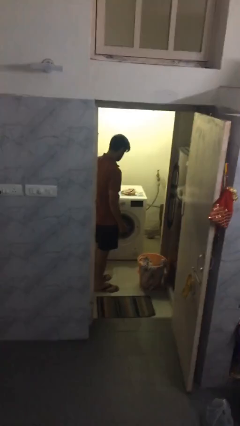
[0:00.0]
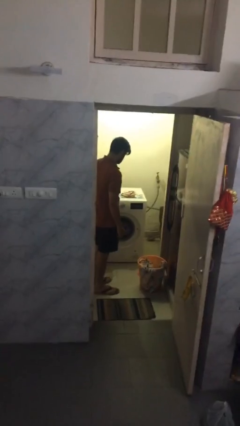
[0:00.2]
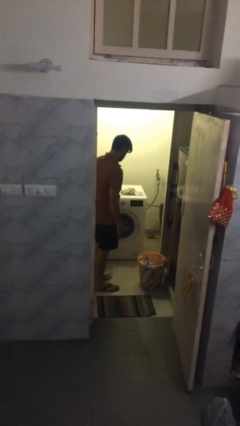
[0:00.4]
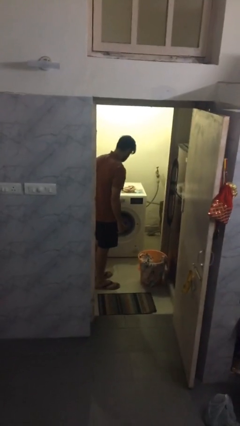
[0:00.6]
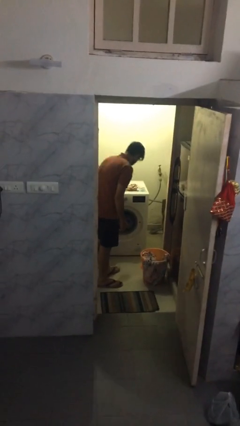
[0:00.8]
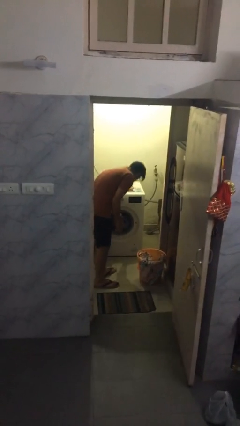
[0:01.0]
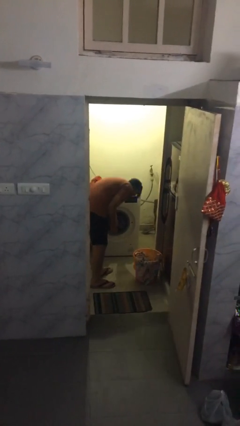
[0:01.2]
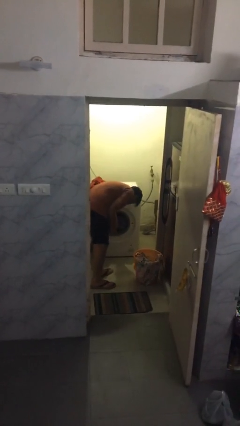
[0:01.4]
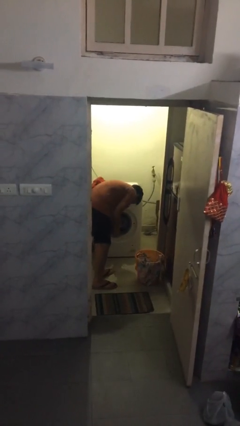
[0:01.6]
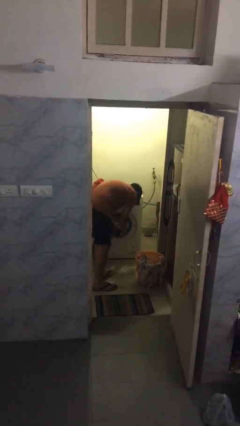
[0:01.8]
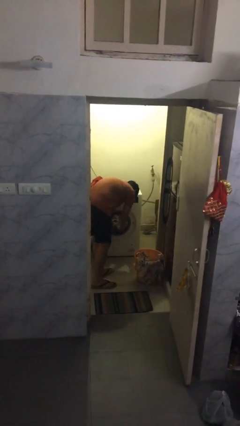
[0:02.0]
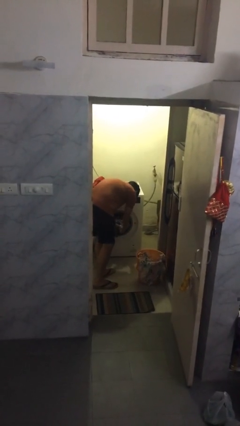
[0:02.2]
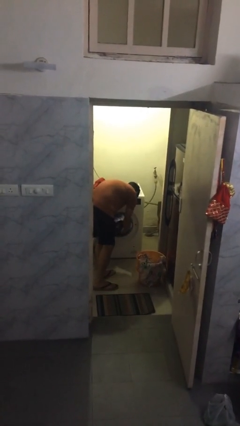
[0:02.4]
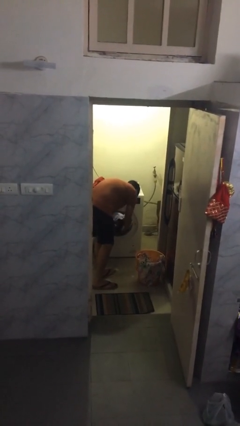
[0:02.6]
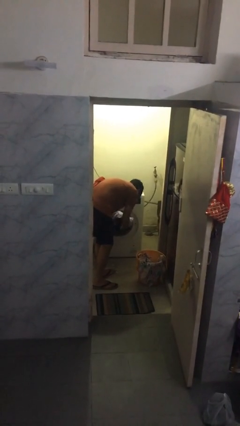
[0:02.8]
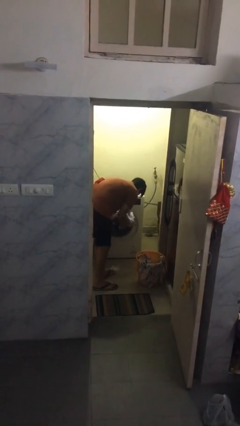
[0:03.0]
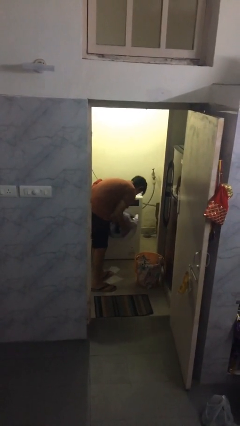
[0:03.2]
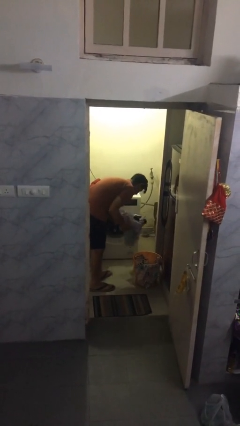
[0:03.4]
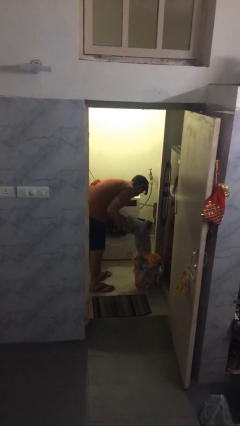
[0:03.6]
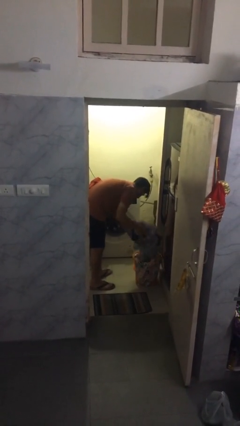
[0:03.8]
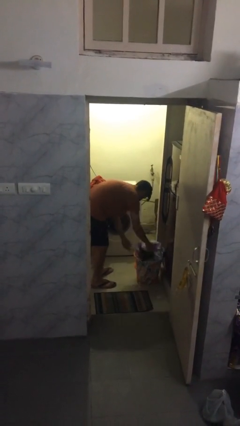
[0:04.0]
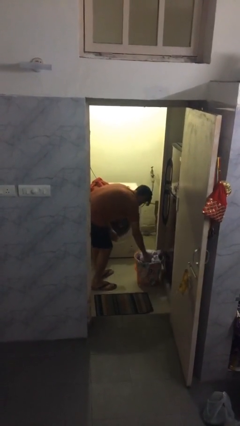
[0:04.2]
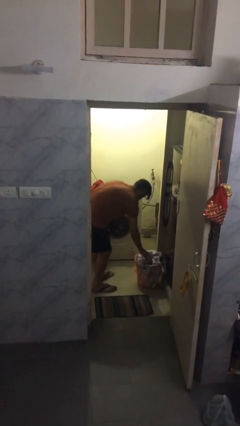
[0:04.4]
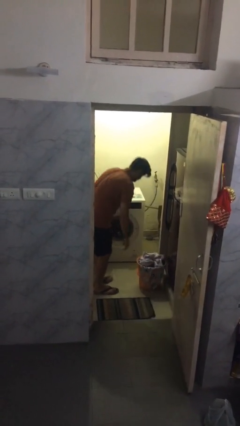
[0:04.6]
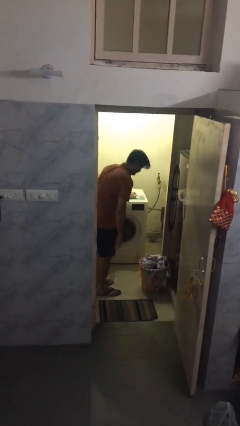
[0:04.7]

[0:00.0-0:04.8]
person unloads clotheswasher

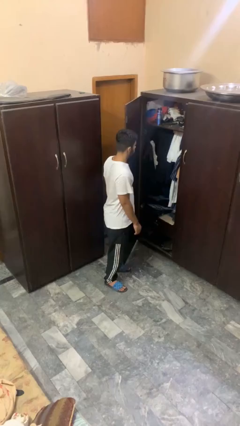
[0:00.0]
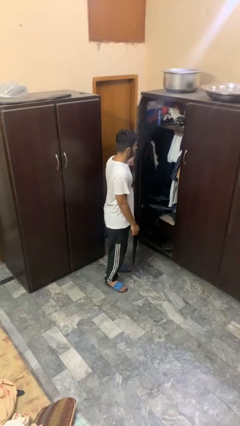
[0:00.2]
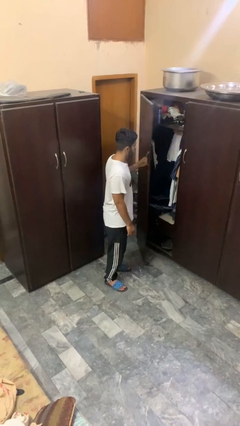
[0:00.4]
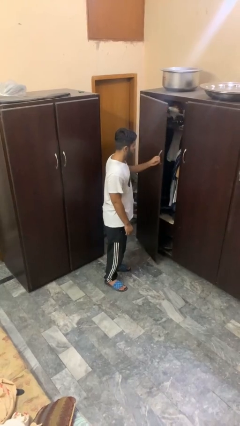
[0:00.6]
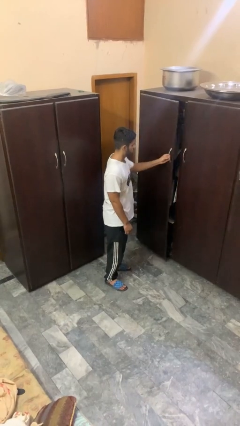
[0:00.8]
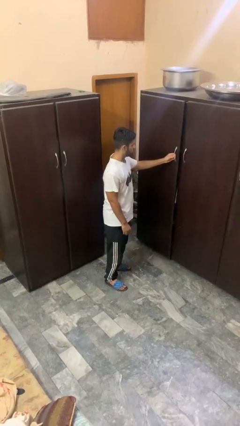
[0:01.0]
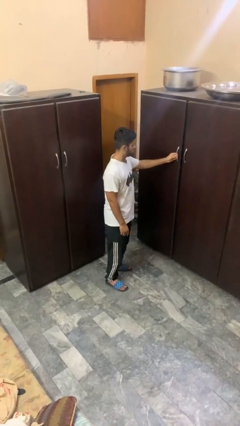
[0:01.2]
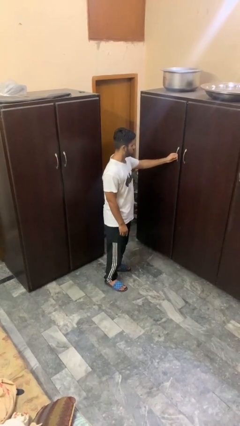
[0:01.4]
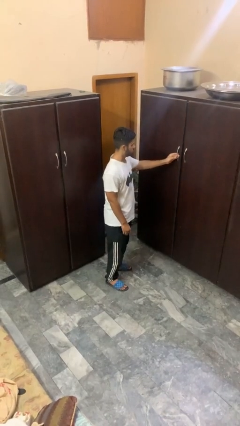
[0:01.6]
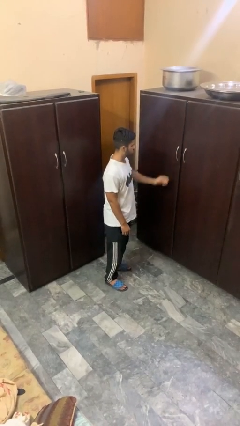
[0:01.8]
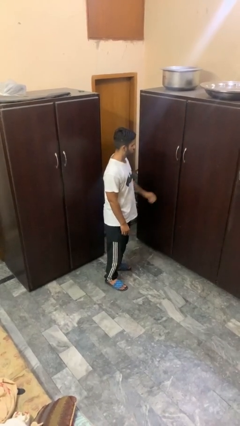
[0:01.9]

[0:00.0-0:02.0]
person closes closet door

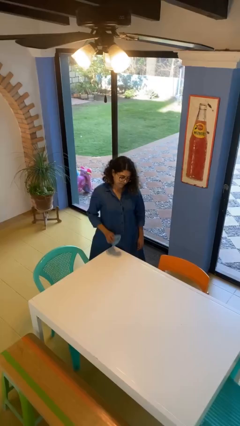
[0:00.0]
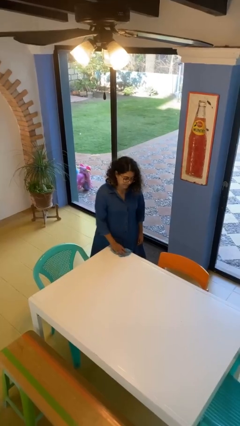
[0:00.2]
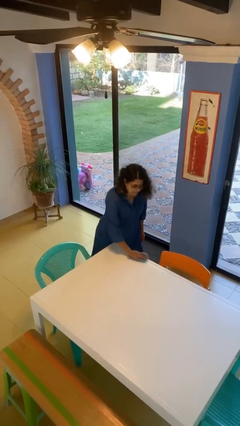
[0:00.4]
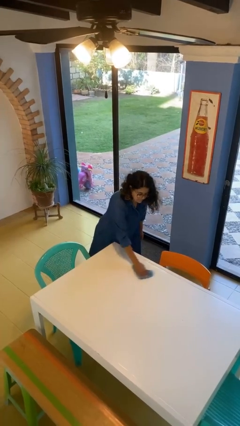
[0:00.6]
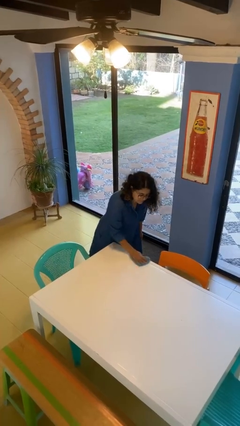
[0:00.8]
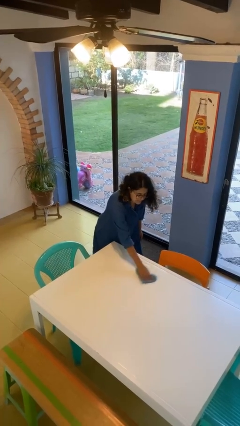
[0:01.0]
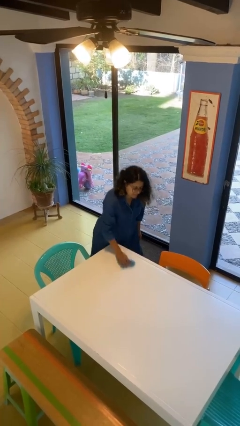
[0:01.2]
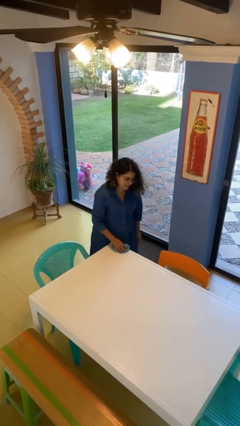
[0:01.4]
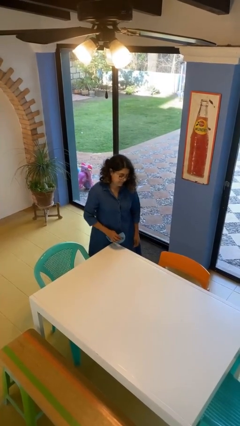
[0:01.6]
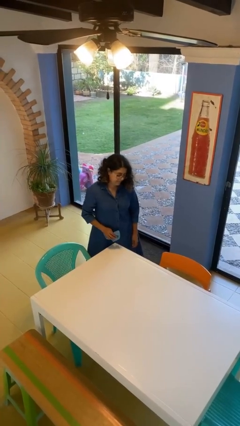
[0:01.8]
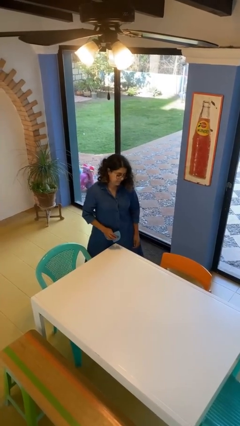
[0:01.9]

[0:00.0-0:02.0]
person cleans table with rag

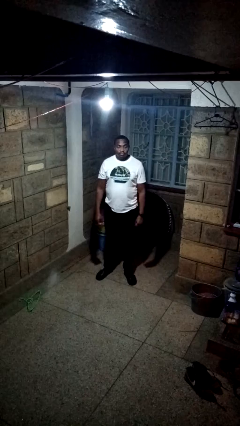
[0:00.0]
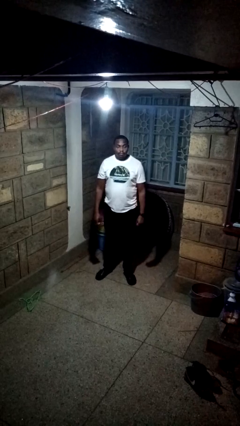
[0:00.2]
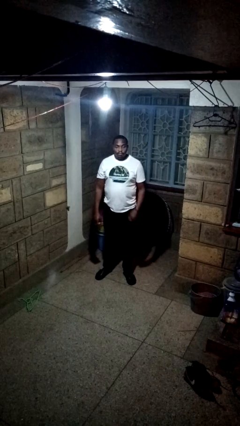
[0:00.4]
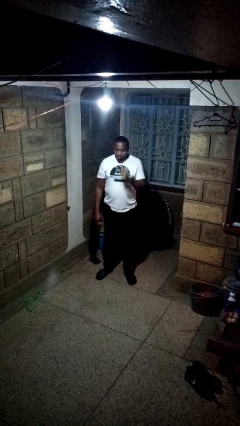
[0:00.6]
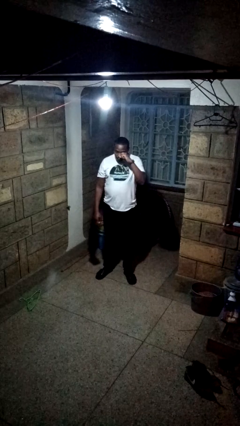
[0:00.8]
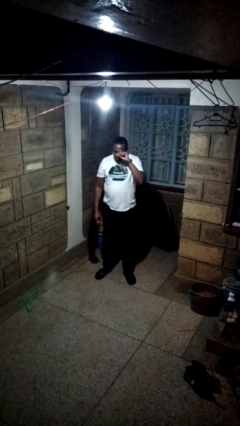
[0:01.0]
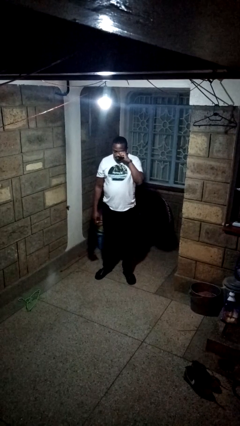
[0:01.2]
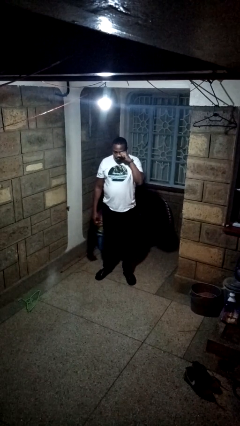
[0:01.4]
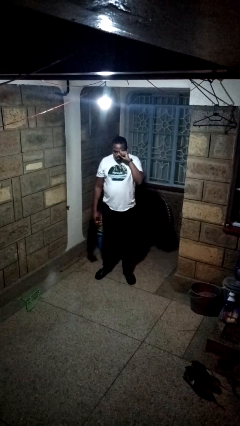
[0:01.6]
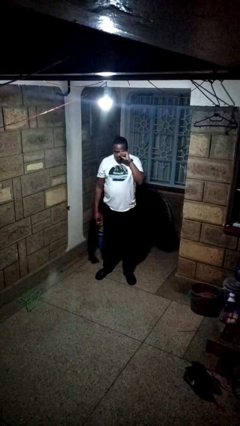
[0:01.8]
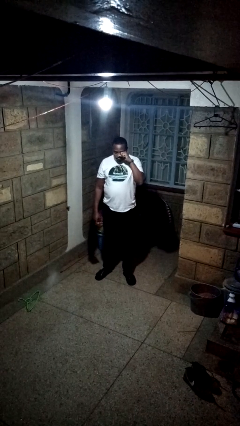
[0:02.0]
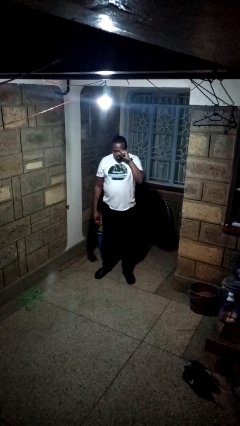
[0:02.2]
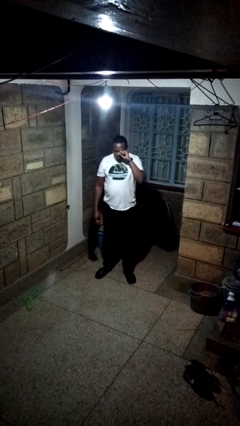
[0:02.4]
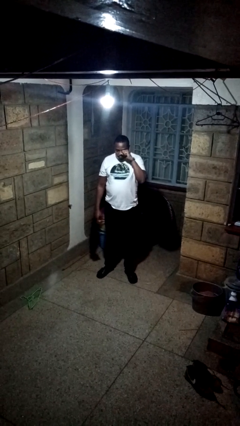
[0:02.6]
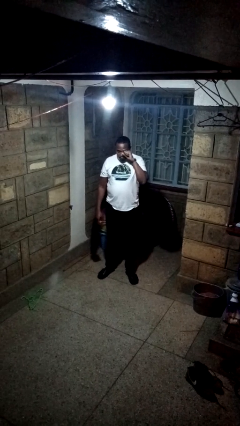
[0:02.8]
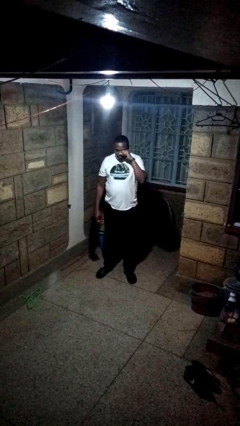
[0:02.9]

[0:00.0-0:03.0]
person rubs eyes

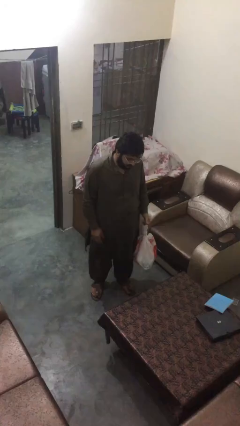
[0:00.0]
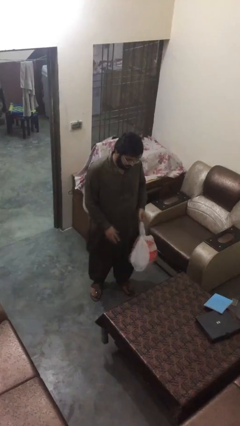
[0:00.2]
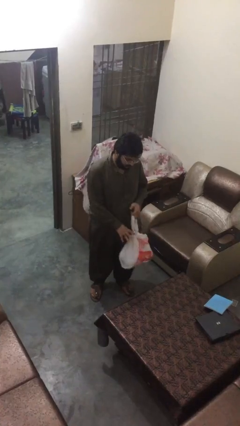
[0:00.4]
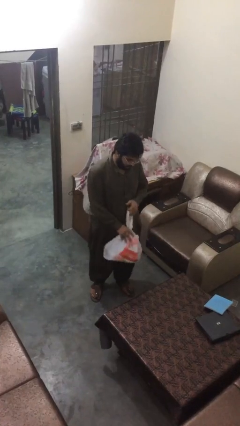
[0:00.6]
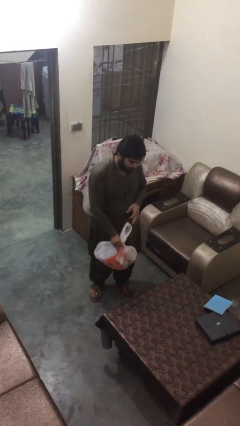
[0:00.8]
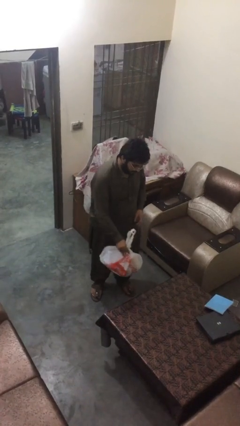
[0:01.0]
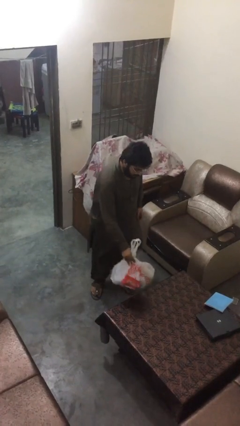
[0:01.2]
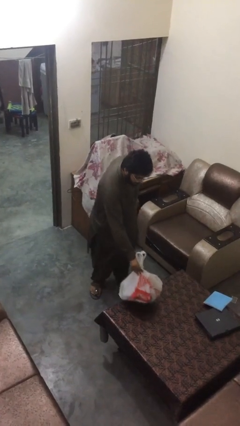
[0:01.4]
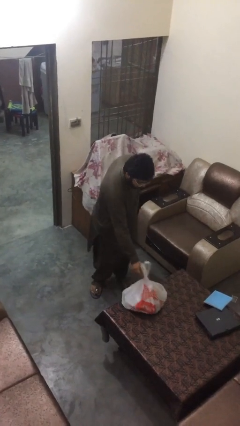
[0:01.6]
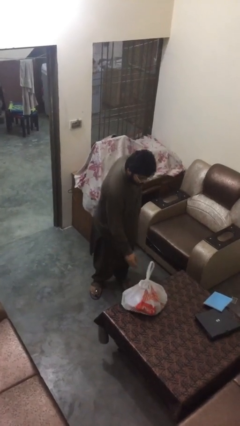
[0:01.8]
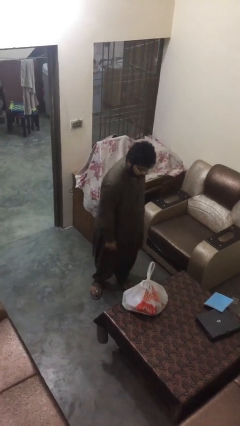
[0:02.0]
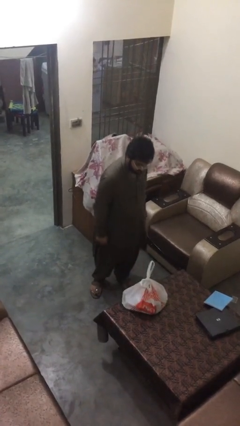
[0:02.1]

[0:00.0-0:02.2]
person puts down object on table

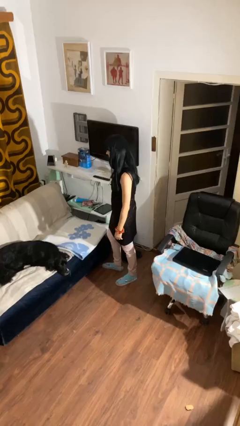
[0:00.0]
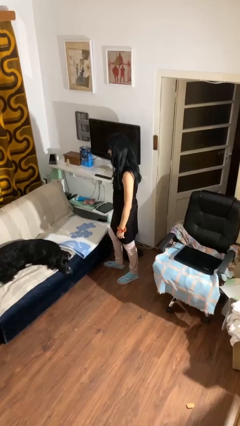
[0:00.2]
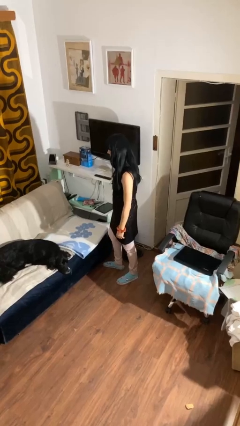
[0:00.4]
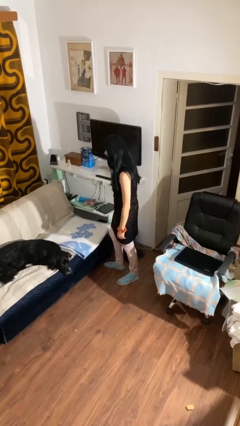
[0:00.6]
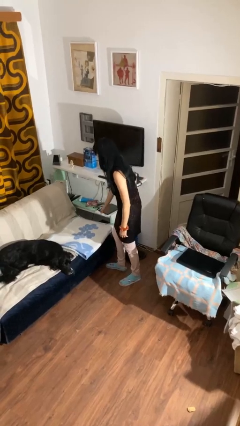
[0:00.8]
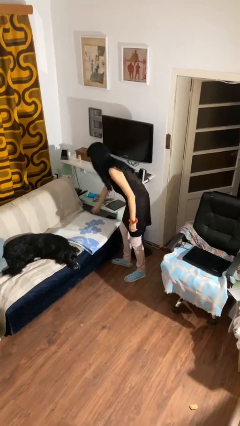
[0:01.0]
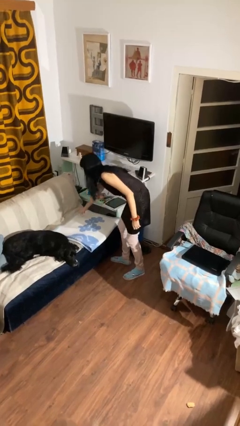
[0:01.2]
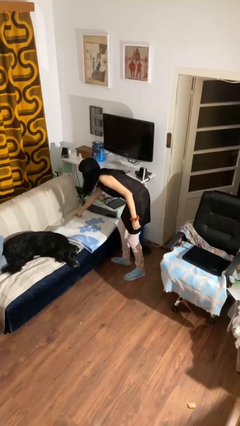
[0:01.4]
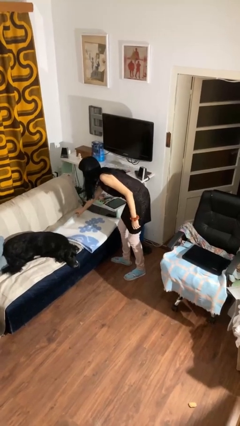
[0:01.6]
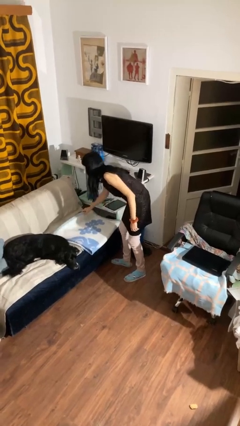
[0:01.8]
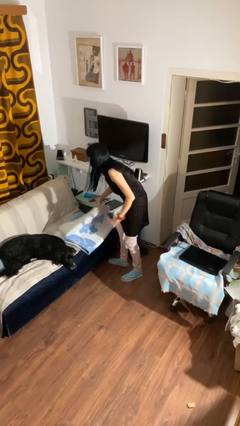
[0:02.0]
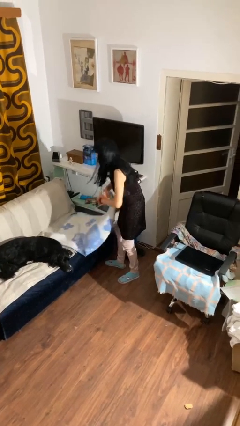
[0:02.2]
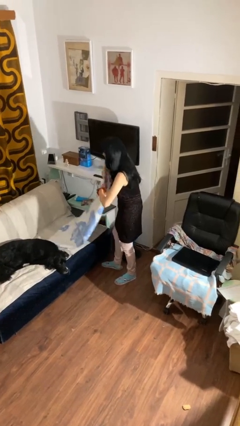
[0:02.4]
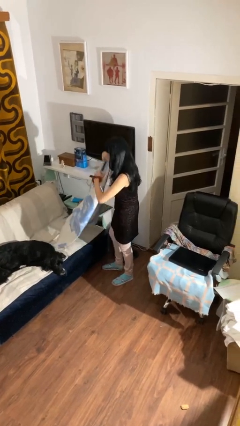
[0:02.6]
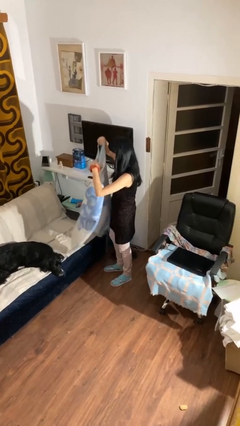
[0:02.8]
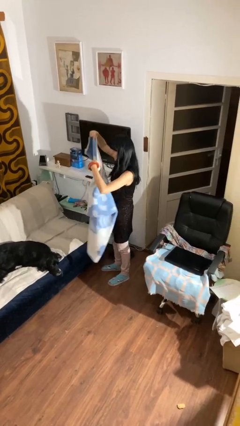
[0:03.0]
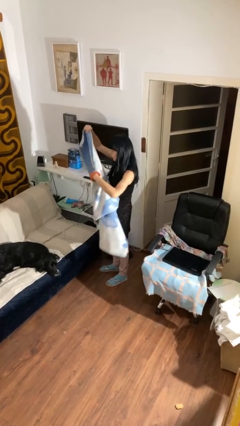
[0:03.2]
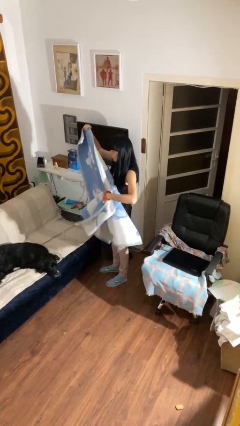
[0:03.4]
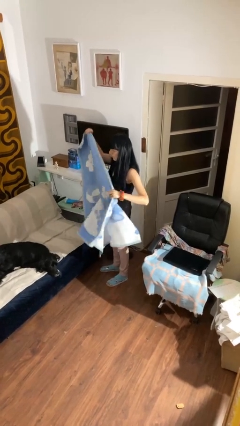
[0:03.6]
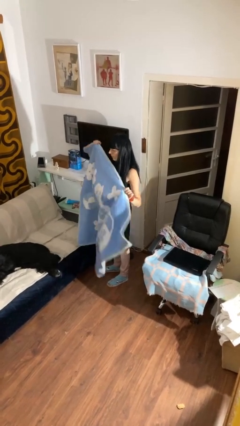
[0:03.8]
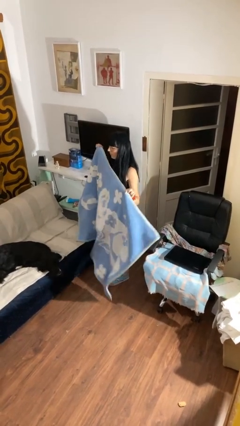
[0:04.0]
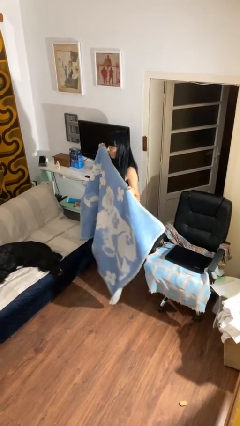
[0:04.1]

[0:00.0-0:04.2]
person unfolds blanket
